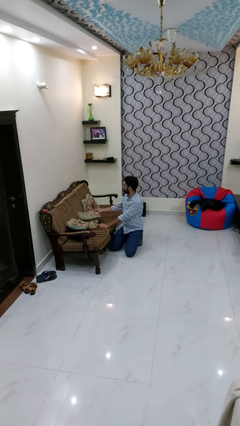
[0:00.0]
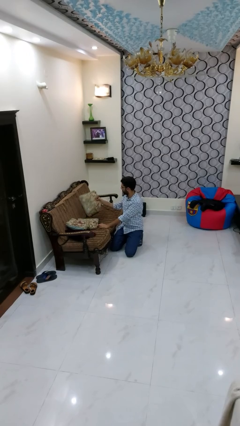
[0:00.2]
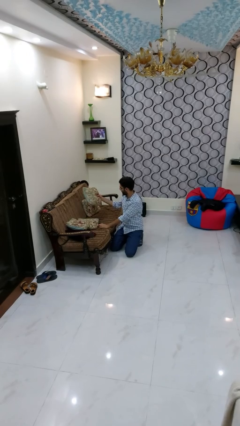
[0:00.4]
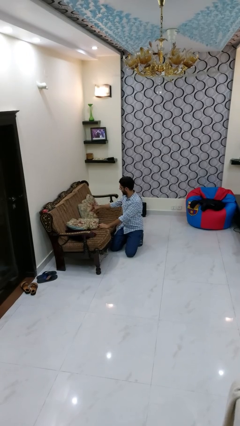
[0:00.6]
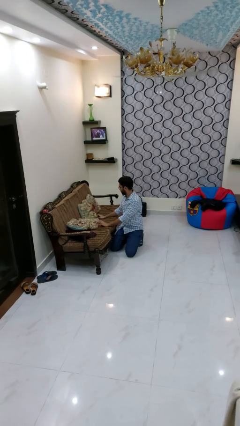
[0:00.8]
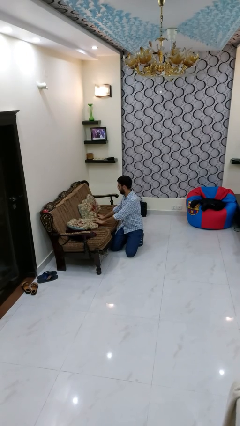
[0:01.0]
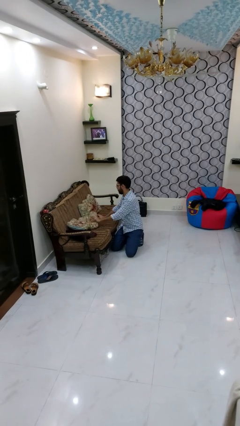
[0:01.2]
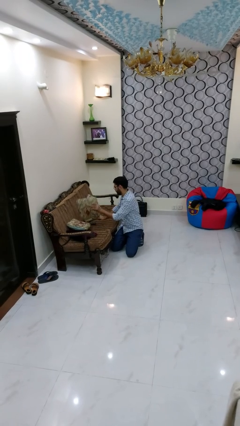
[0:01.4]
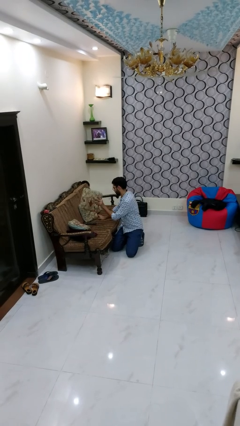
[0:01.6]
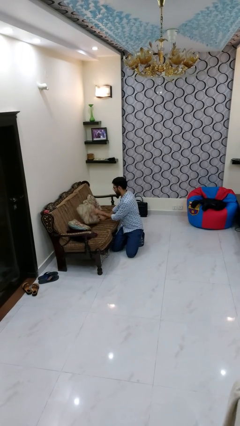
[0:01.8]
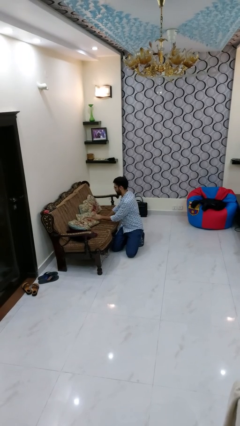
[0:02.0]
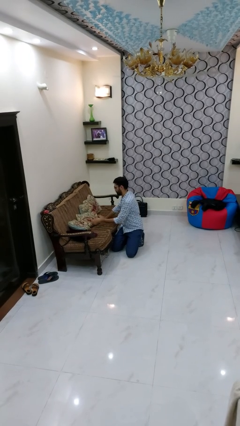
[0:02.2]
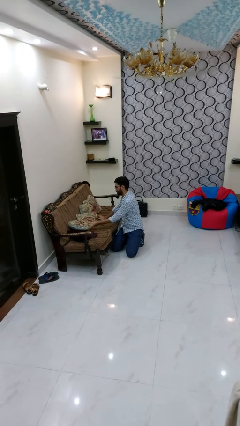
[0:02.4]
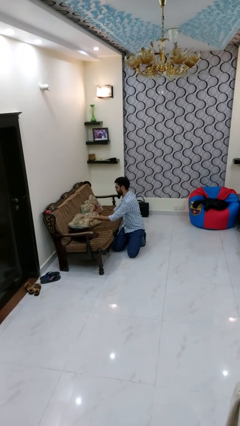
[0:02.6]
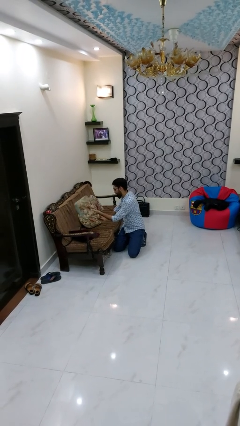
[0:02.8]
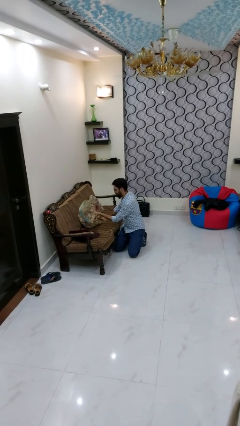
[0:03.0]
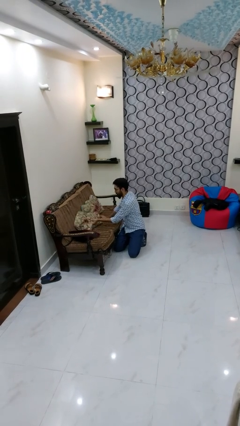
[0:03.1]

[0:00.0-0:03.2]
person searches in couch

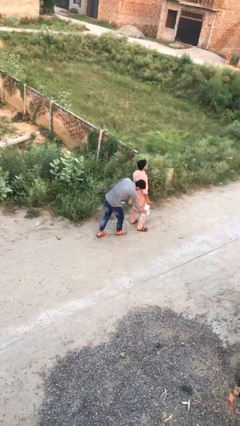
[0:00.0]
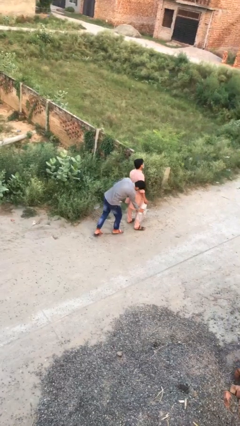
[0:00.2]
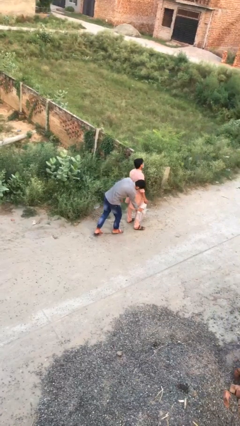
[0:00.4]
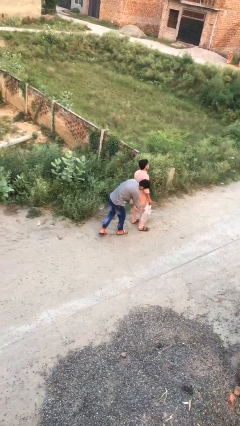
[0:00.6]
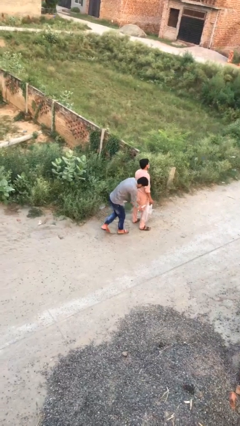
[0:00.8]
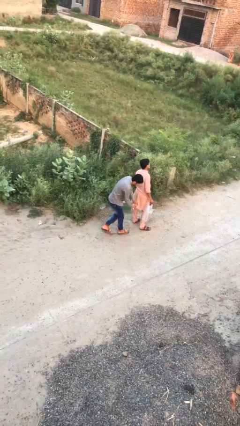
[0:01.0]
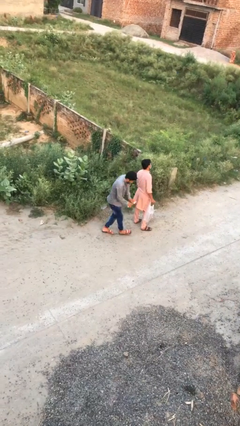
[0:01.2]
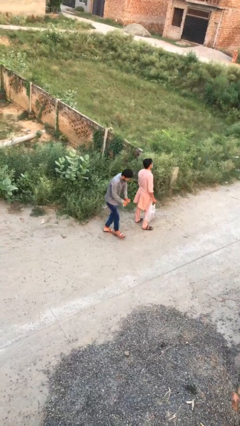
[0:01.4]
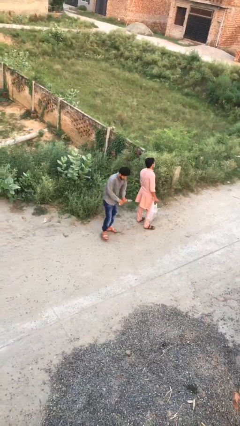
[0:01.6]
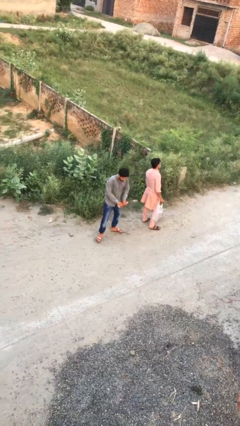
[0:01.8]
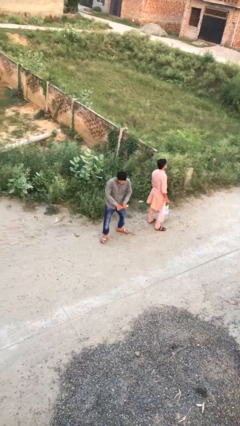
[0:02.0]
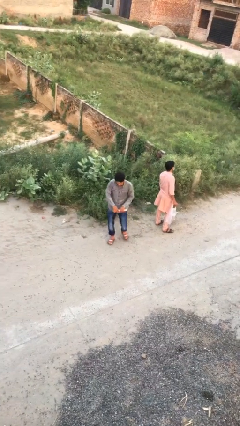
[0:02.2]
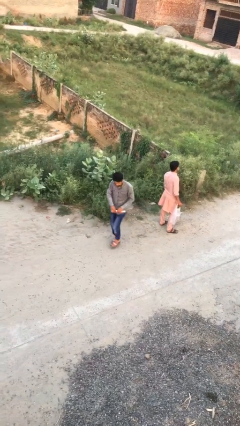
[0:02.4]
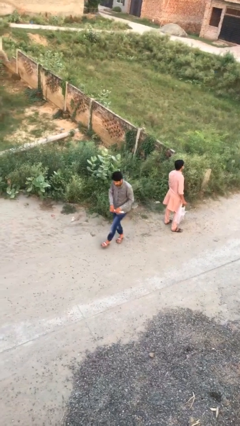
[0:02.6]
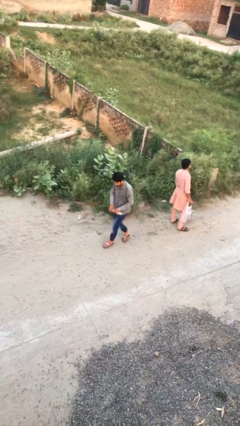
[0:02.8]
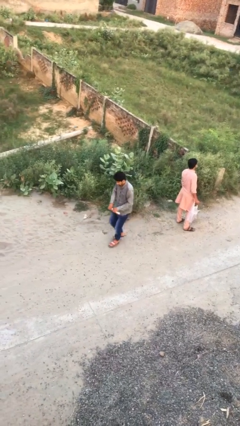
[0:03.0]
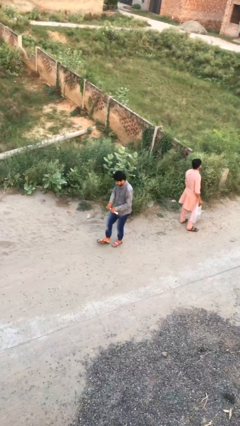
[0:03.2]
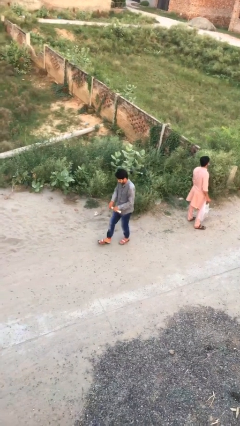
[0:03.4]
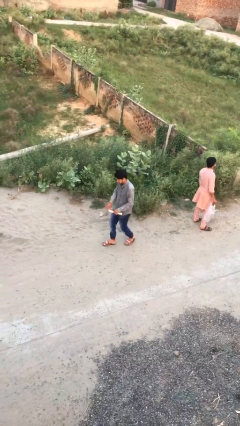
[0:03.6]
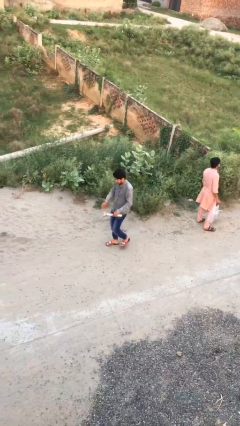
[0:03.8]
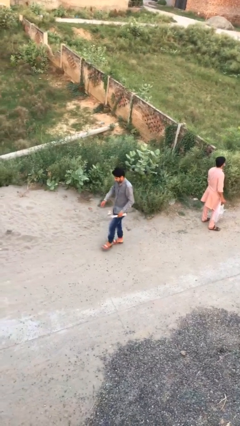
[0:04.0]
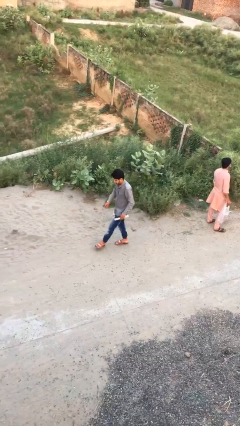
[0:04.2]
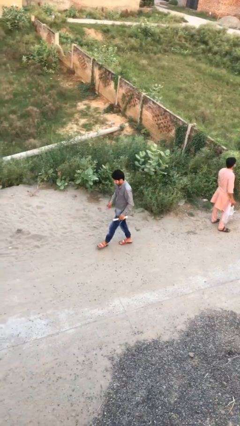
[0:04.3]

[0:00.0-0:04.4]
person steals object from person

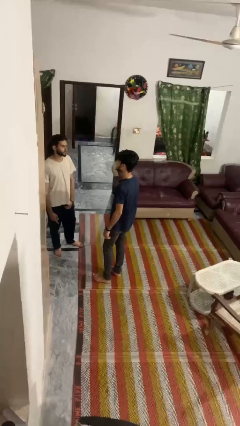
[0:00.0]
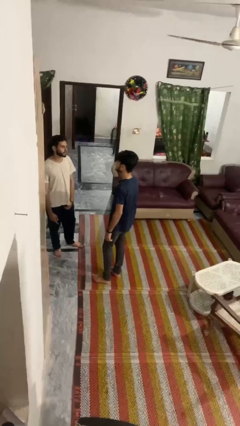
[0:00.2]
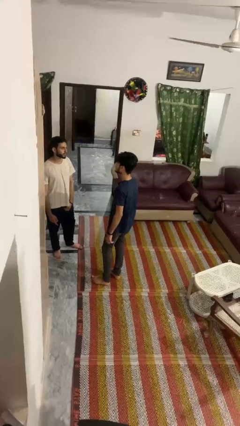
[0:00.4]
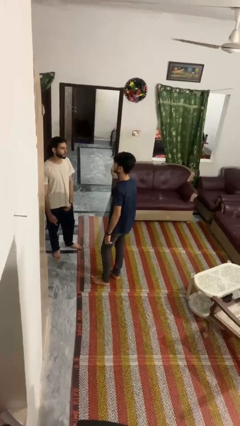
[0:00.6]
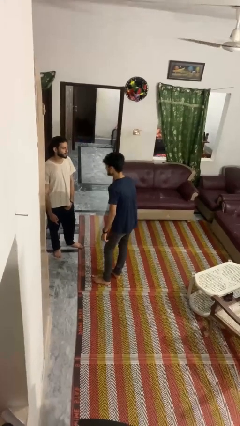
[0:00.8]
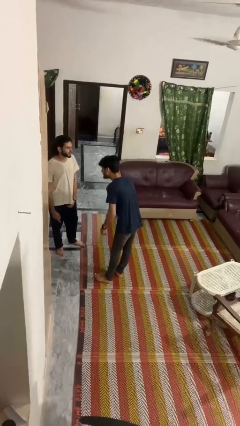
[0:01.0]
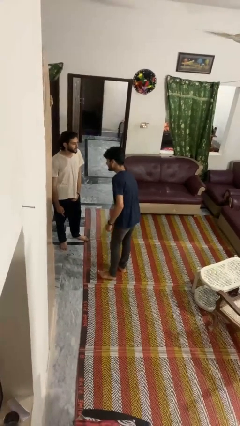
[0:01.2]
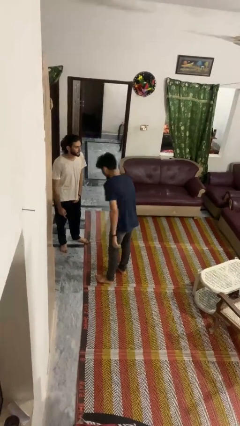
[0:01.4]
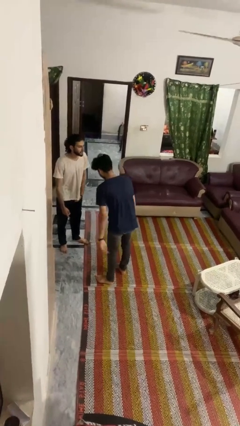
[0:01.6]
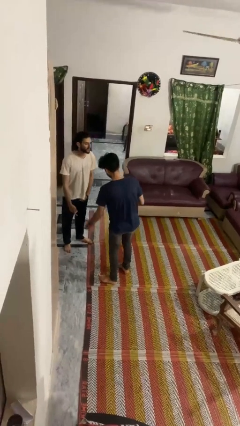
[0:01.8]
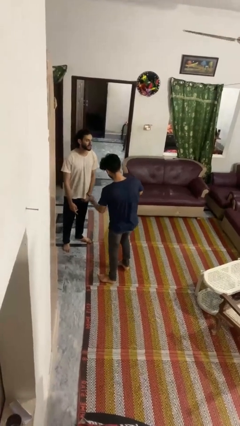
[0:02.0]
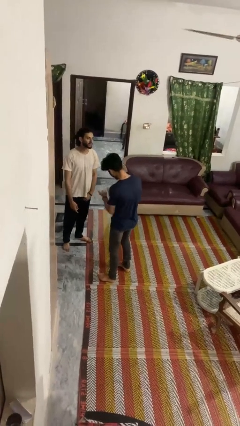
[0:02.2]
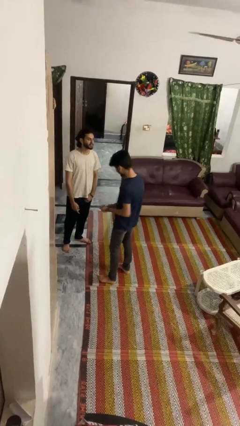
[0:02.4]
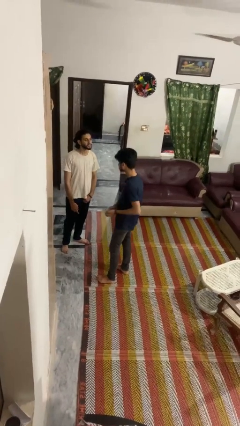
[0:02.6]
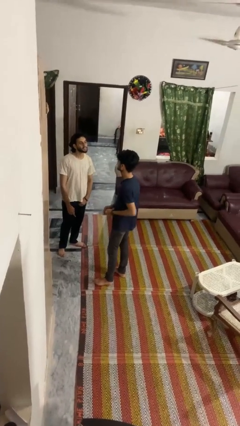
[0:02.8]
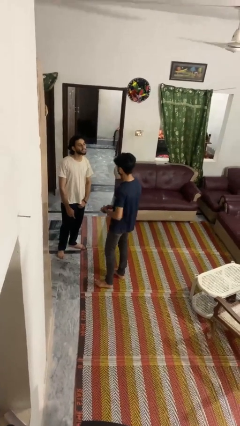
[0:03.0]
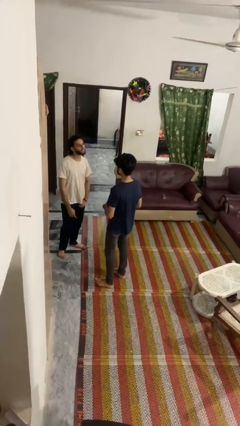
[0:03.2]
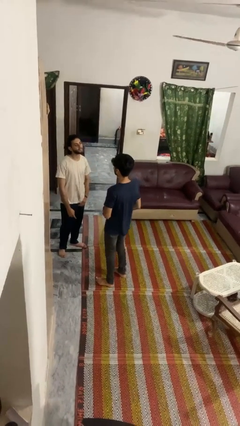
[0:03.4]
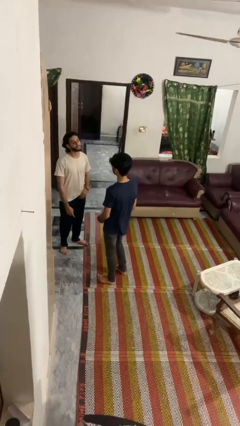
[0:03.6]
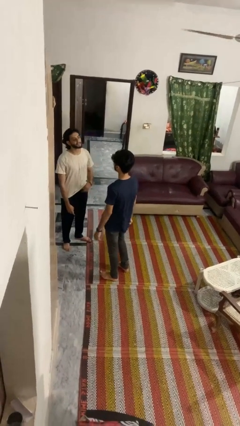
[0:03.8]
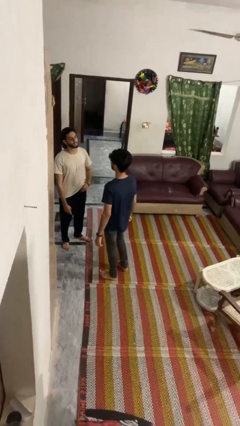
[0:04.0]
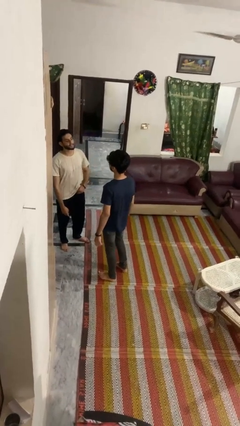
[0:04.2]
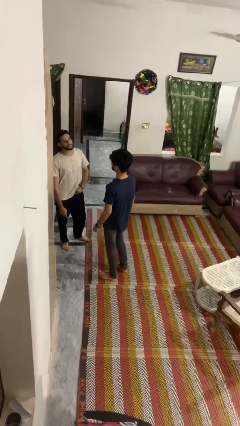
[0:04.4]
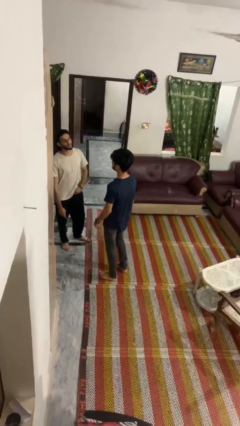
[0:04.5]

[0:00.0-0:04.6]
person laughs with person

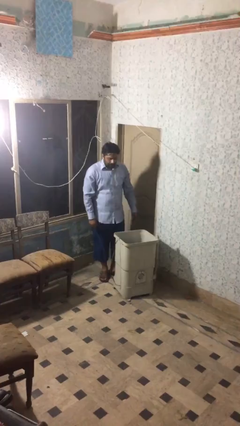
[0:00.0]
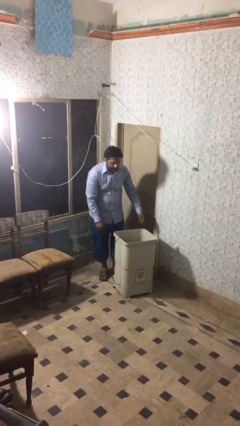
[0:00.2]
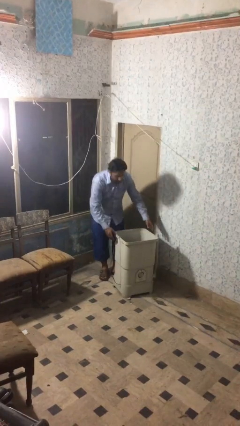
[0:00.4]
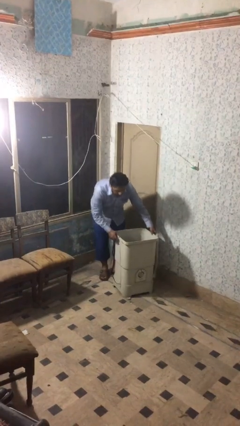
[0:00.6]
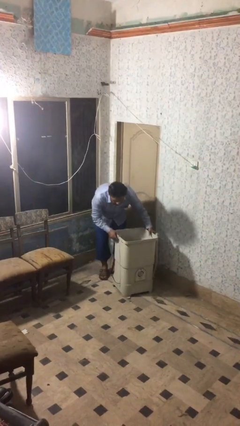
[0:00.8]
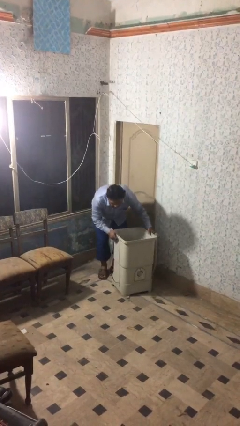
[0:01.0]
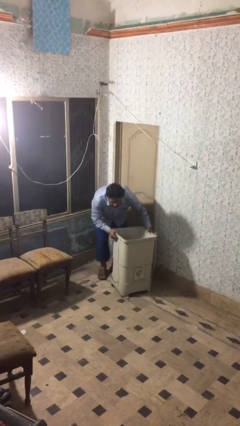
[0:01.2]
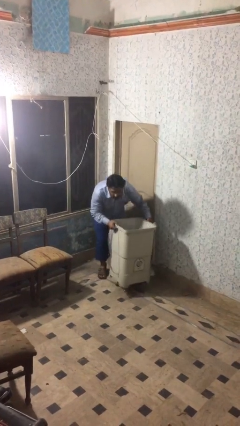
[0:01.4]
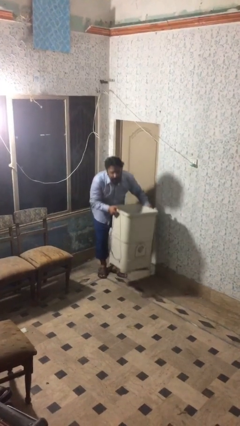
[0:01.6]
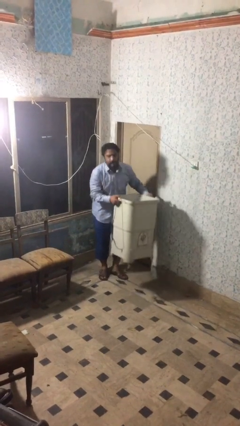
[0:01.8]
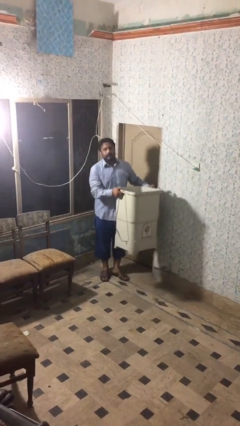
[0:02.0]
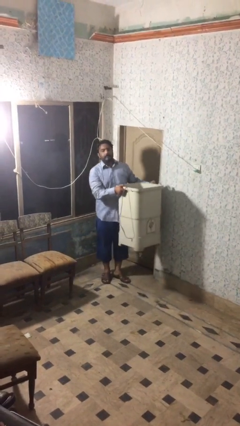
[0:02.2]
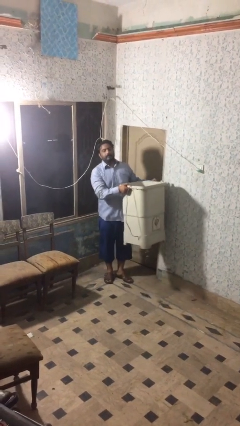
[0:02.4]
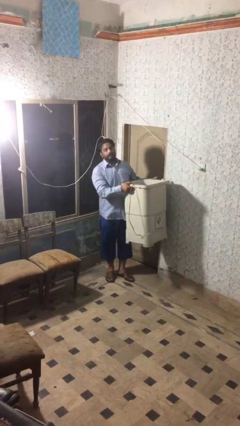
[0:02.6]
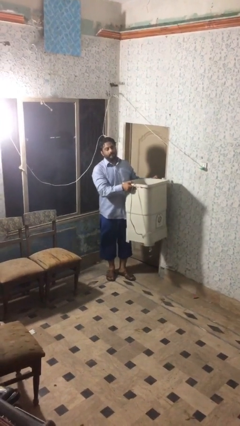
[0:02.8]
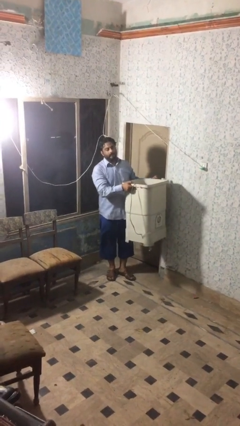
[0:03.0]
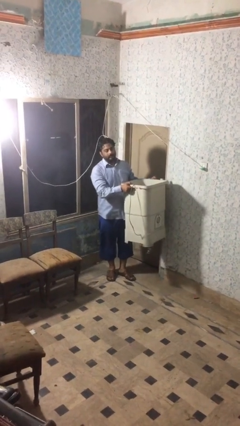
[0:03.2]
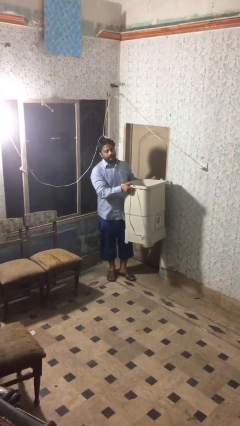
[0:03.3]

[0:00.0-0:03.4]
person picks up object from floor

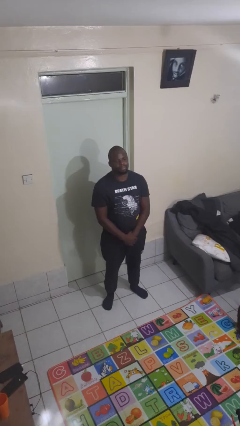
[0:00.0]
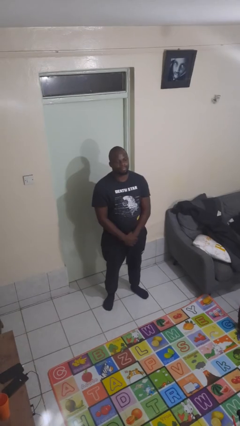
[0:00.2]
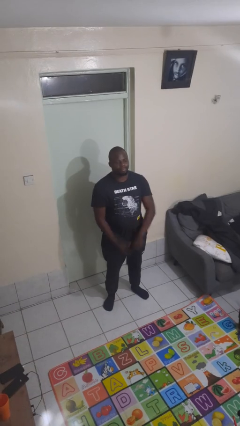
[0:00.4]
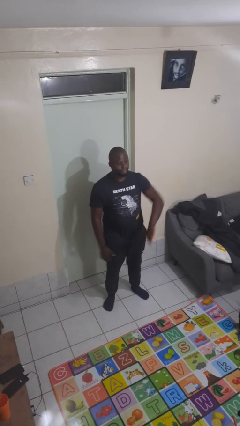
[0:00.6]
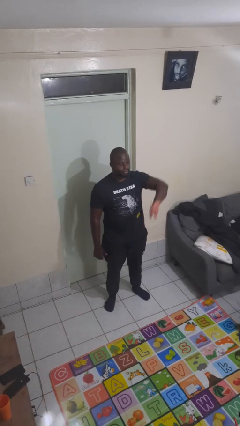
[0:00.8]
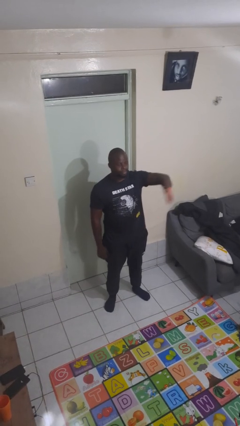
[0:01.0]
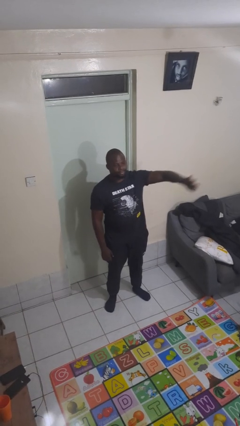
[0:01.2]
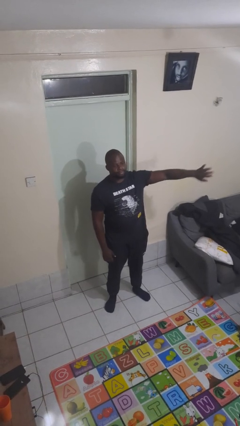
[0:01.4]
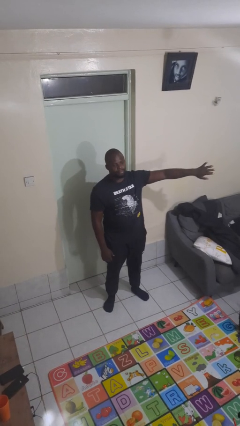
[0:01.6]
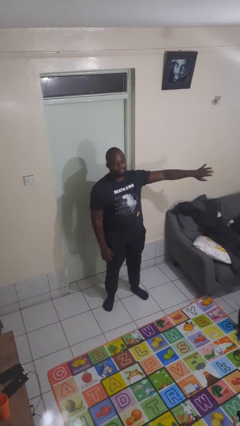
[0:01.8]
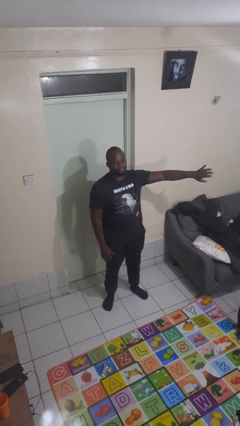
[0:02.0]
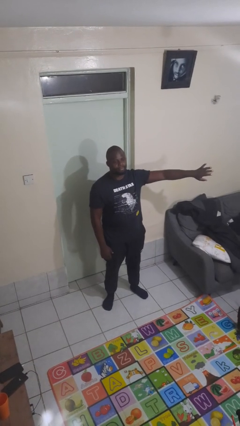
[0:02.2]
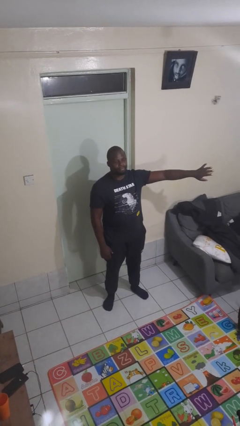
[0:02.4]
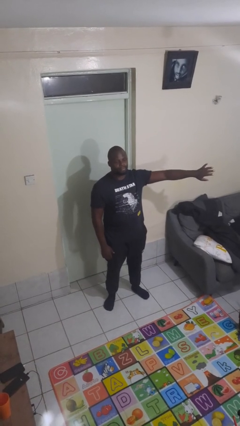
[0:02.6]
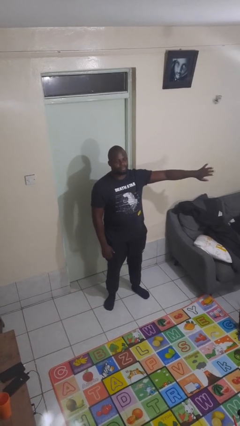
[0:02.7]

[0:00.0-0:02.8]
person gestures swipe left
